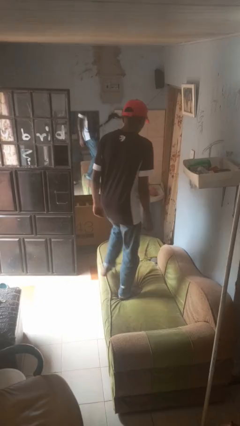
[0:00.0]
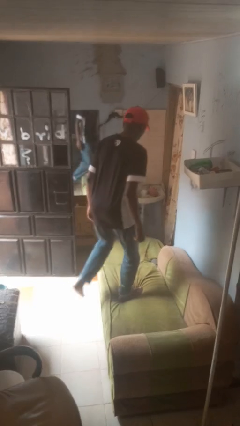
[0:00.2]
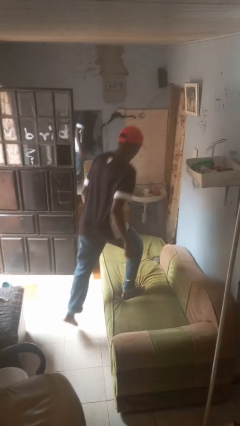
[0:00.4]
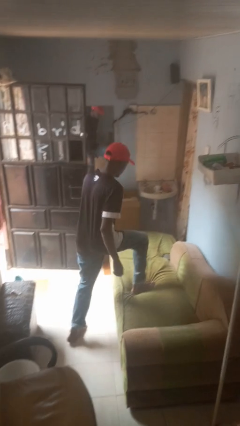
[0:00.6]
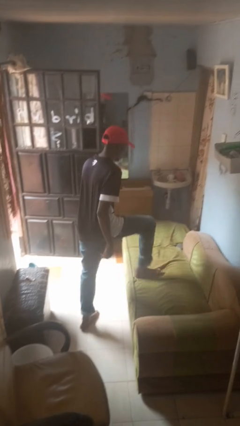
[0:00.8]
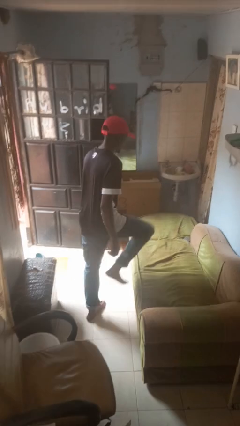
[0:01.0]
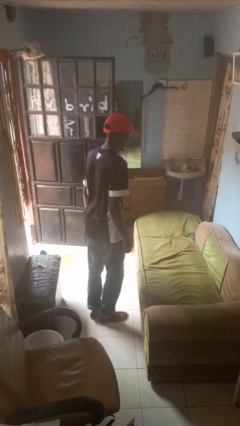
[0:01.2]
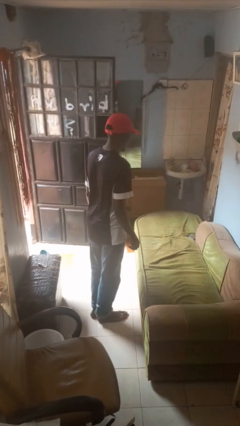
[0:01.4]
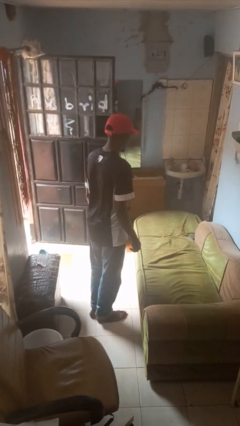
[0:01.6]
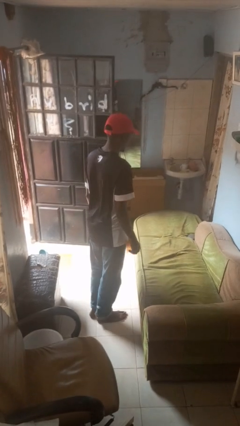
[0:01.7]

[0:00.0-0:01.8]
person climbs off couch

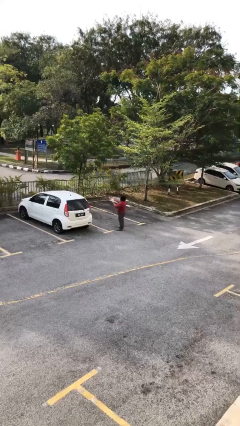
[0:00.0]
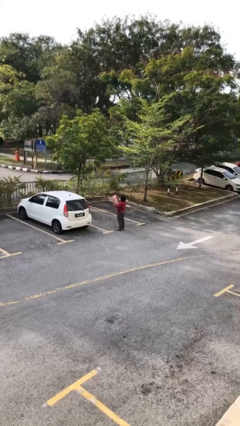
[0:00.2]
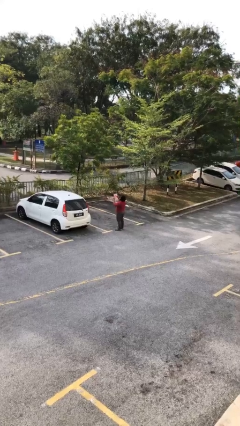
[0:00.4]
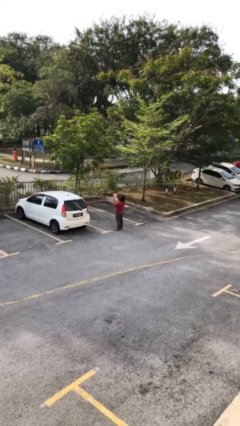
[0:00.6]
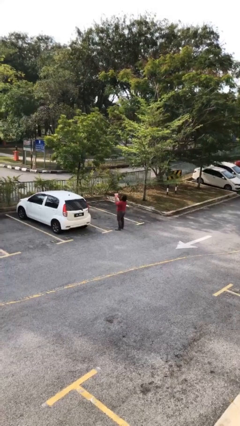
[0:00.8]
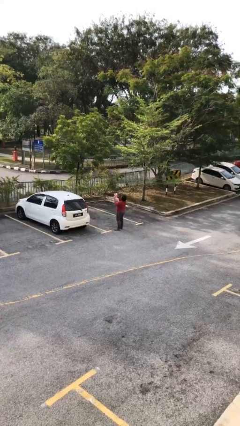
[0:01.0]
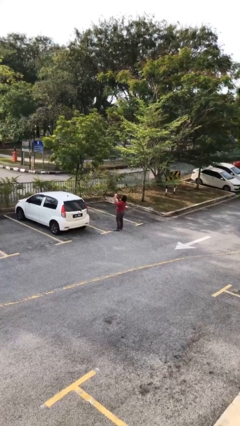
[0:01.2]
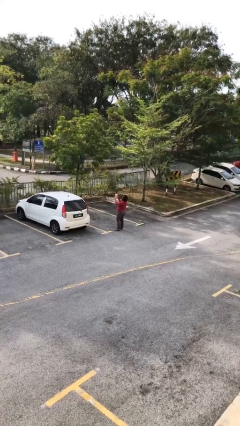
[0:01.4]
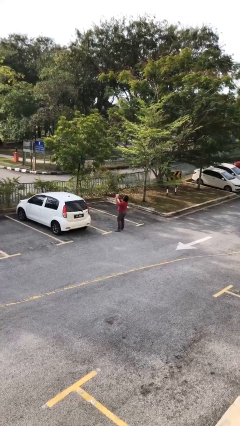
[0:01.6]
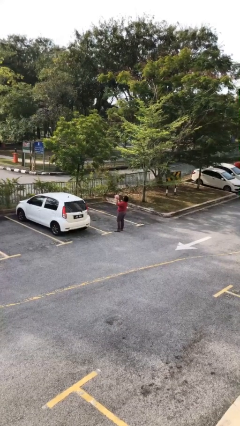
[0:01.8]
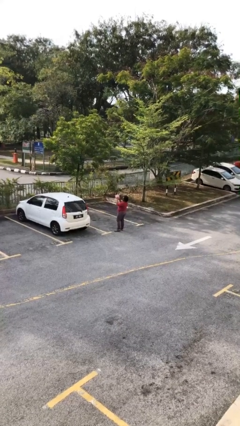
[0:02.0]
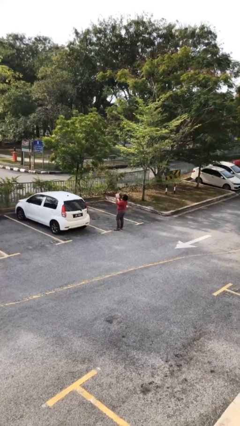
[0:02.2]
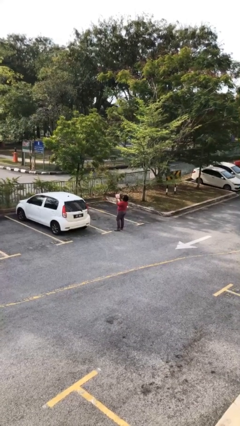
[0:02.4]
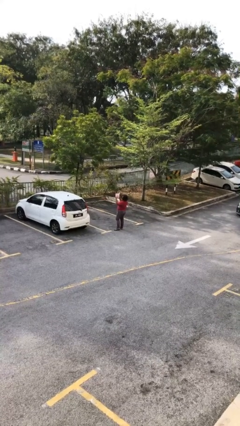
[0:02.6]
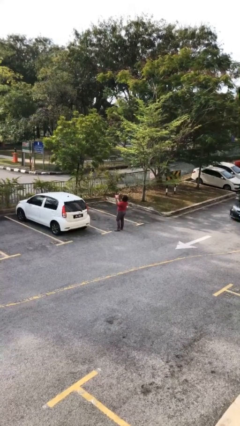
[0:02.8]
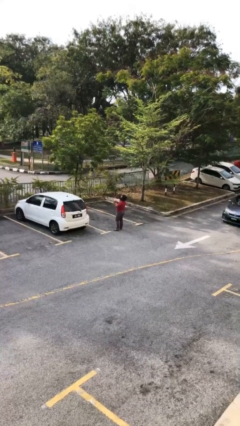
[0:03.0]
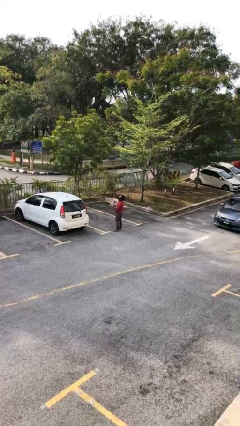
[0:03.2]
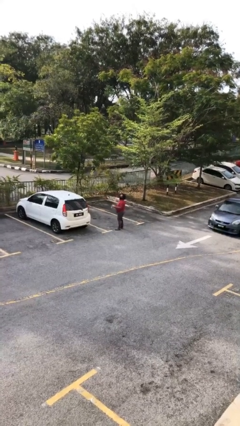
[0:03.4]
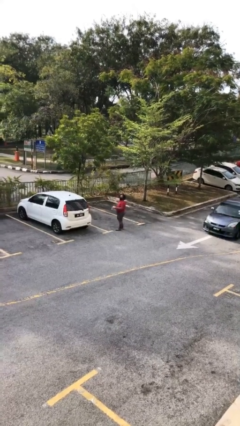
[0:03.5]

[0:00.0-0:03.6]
person reads document

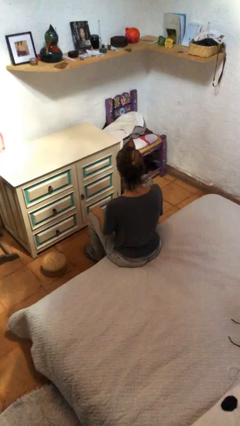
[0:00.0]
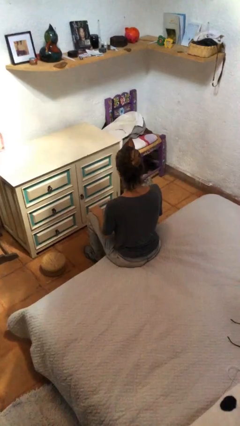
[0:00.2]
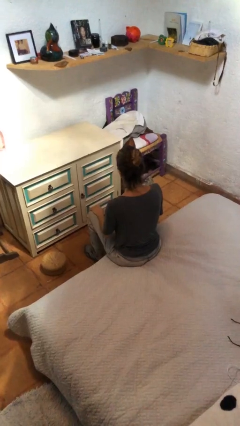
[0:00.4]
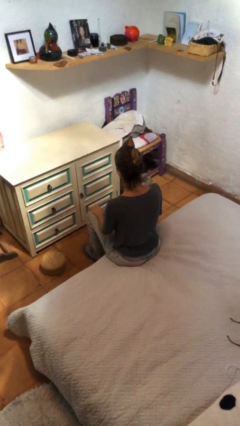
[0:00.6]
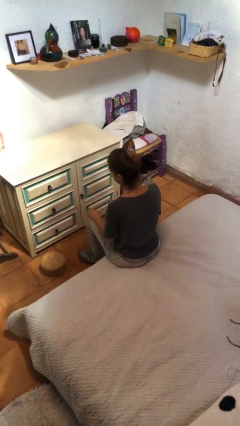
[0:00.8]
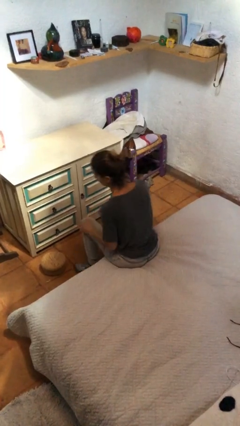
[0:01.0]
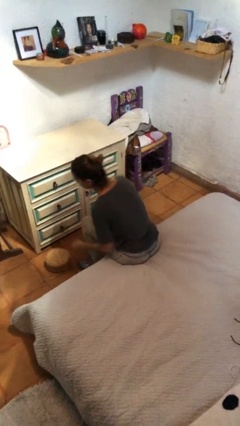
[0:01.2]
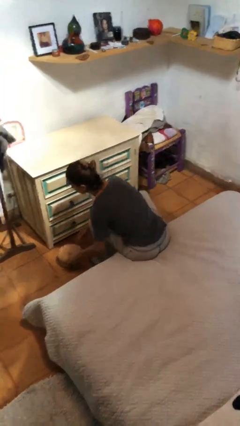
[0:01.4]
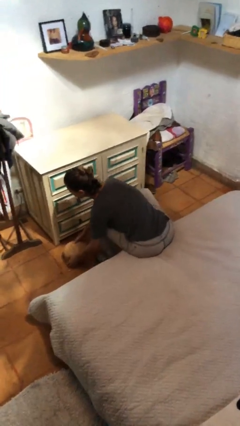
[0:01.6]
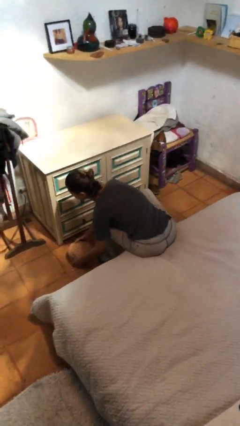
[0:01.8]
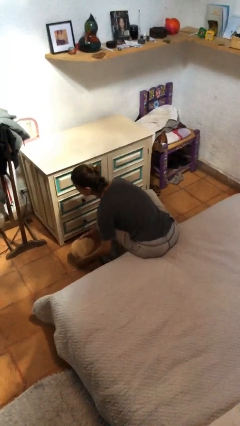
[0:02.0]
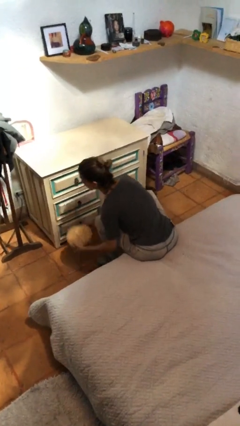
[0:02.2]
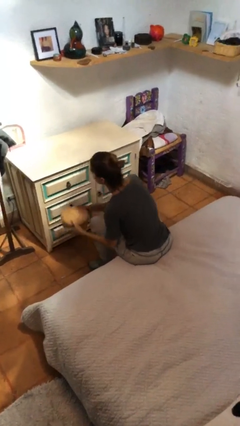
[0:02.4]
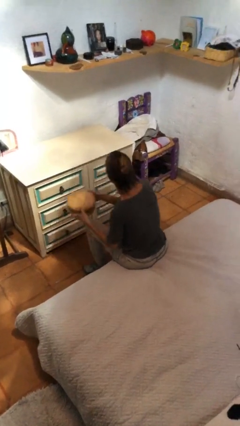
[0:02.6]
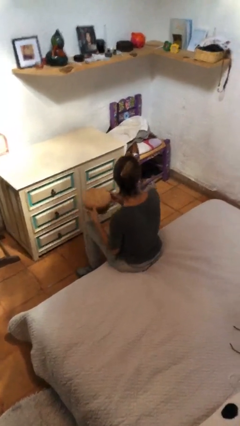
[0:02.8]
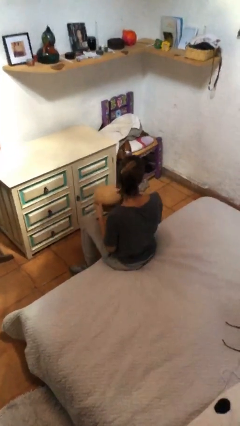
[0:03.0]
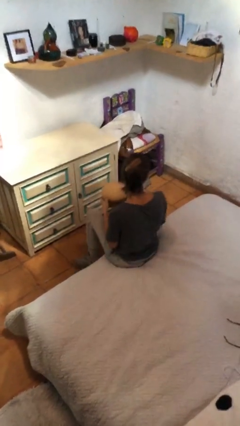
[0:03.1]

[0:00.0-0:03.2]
person picks up object from floor

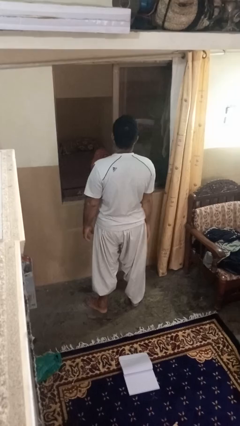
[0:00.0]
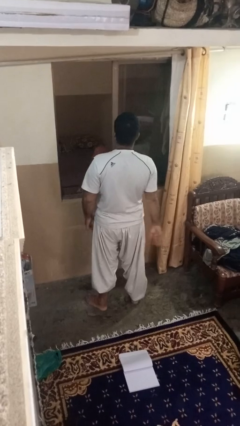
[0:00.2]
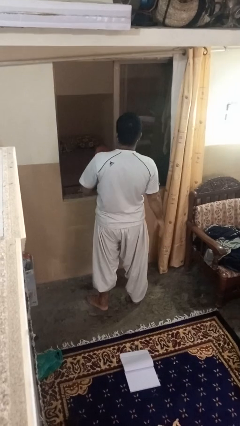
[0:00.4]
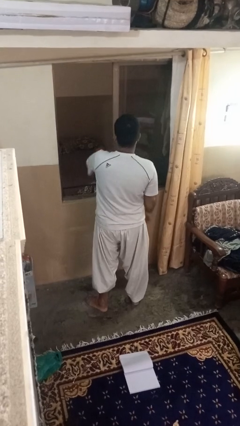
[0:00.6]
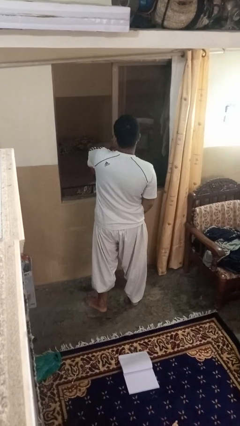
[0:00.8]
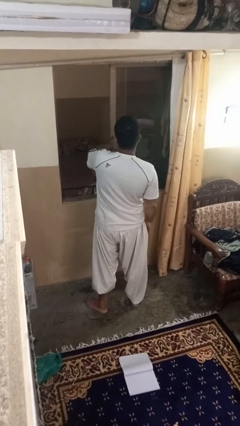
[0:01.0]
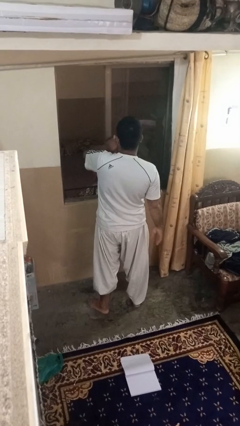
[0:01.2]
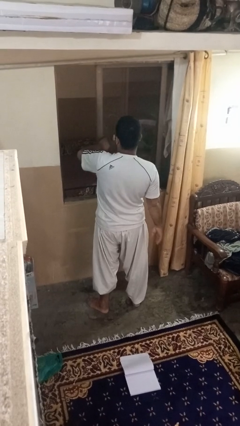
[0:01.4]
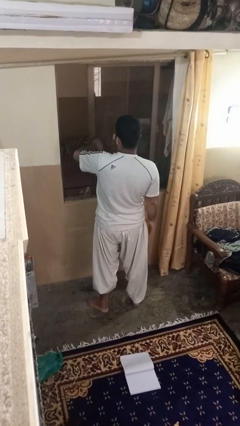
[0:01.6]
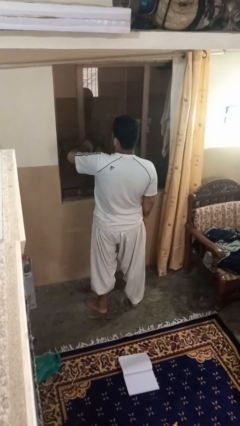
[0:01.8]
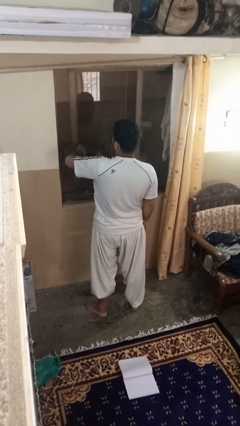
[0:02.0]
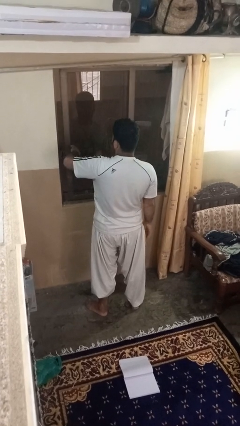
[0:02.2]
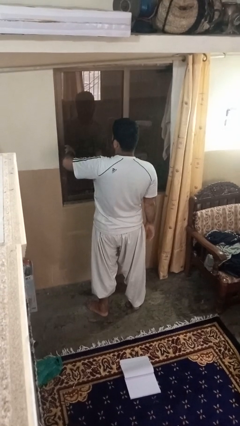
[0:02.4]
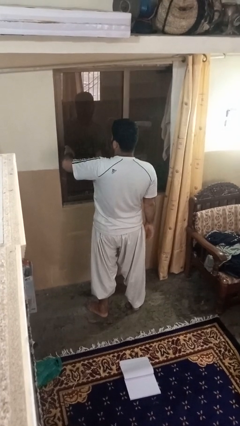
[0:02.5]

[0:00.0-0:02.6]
person closes home window

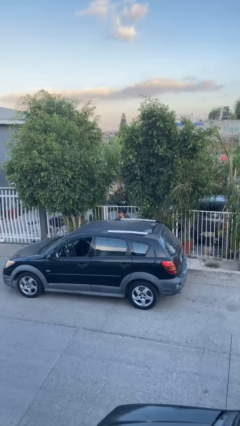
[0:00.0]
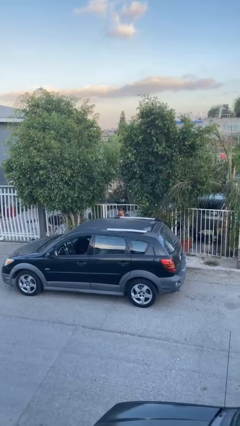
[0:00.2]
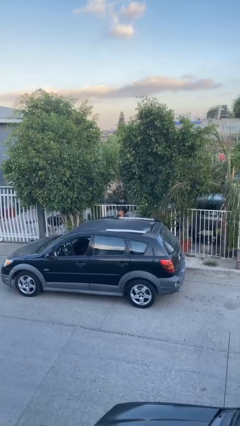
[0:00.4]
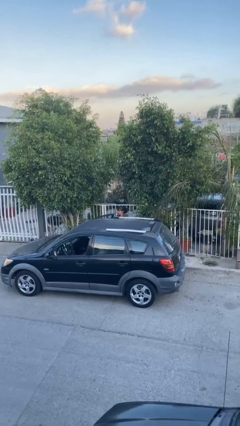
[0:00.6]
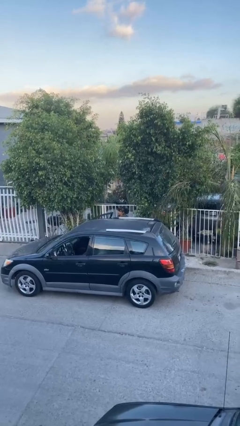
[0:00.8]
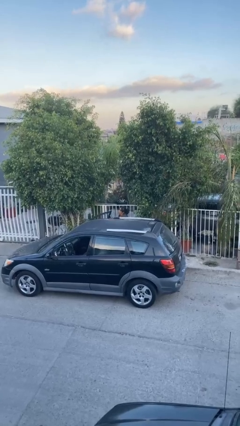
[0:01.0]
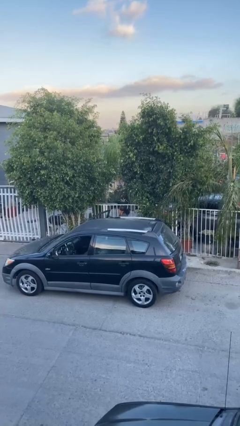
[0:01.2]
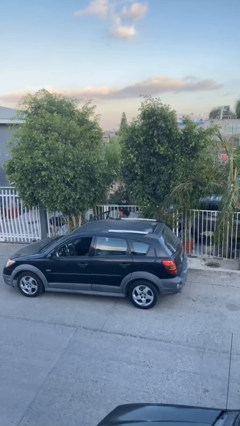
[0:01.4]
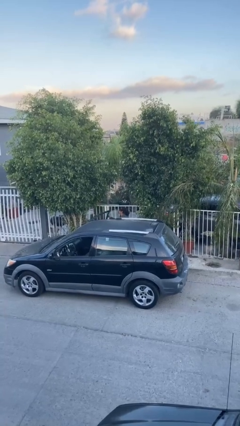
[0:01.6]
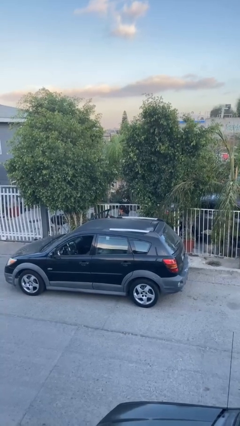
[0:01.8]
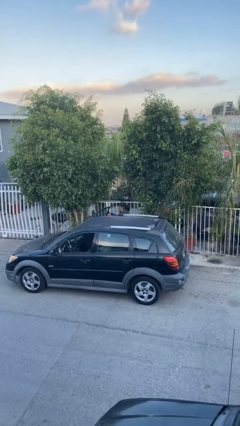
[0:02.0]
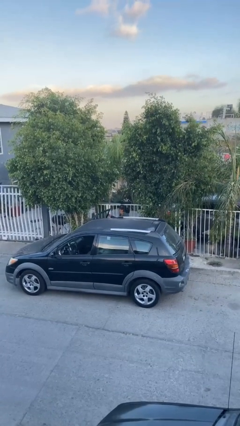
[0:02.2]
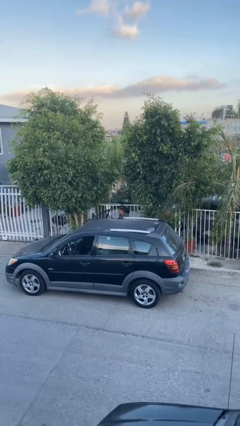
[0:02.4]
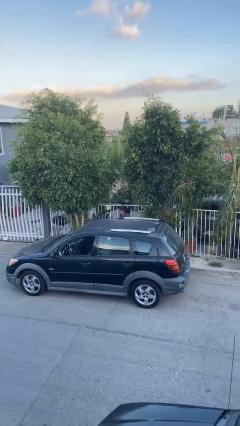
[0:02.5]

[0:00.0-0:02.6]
person opens car door

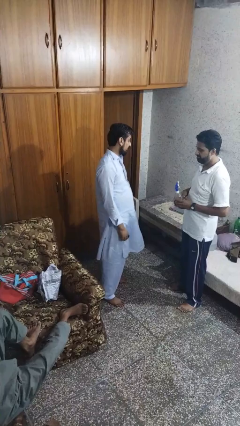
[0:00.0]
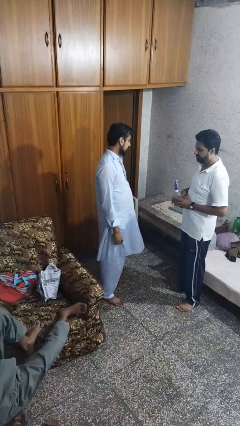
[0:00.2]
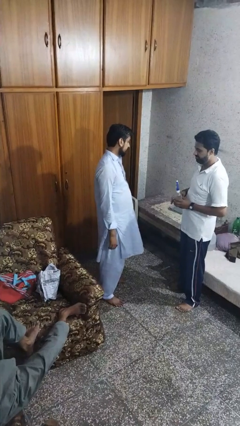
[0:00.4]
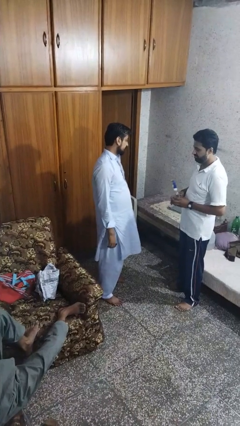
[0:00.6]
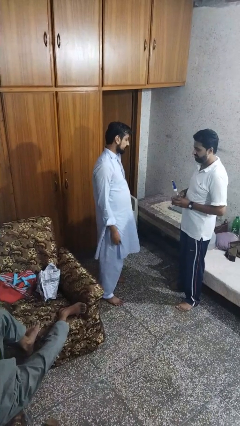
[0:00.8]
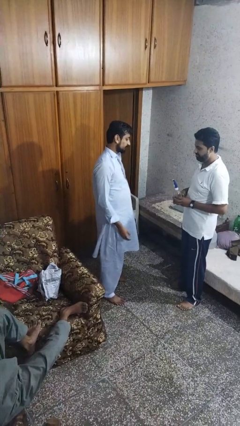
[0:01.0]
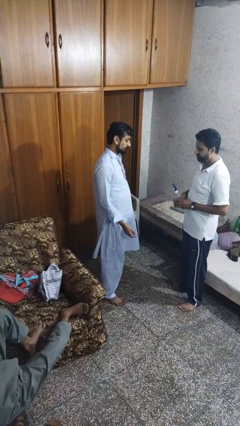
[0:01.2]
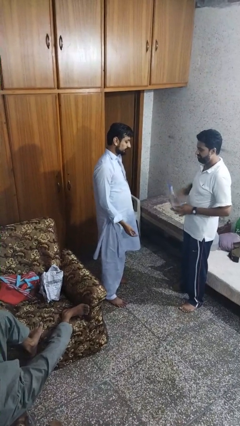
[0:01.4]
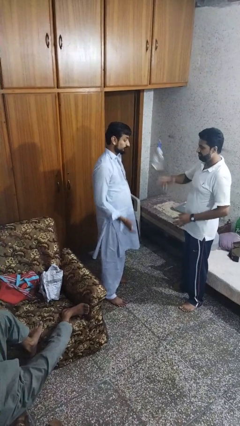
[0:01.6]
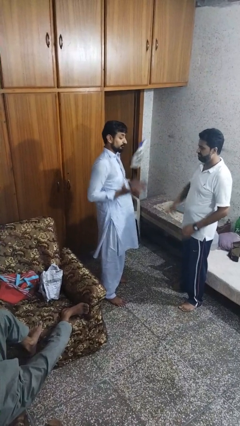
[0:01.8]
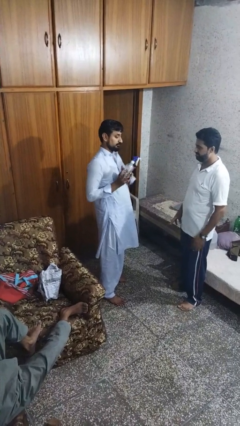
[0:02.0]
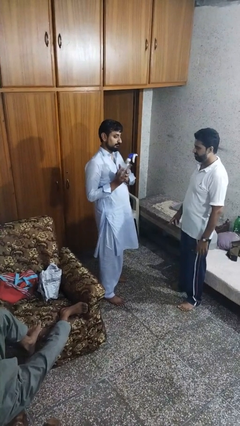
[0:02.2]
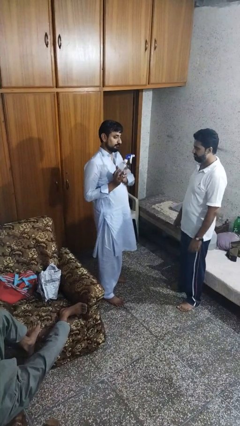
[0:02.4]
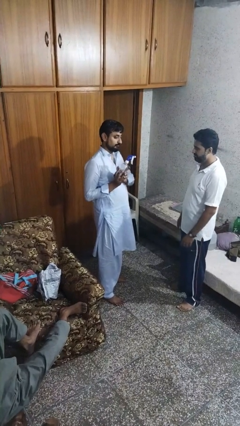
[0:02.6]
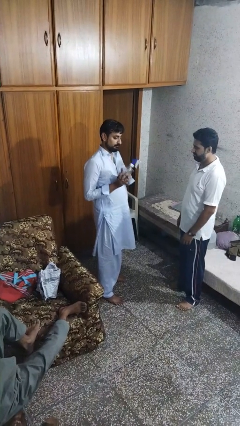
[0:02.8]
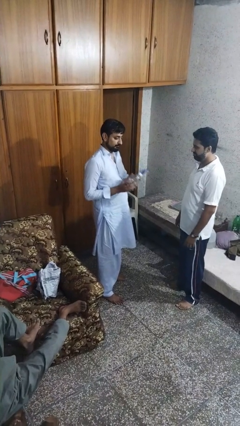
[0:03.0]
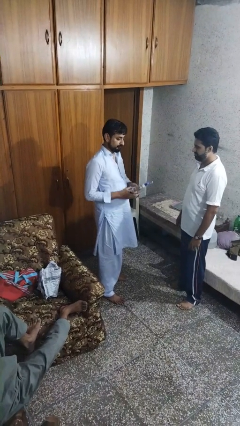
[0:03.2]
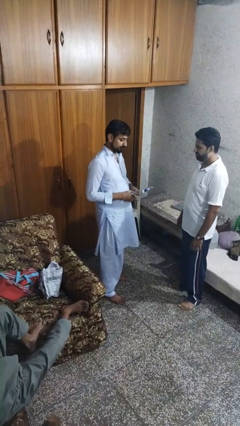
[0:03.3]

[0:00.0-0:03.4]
person catches object from person
